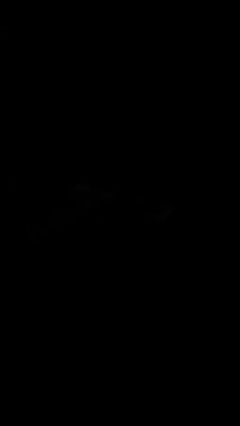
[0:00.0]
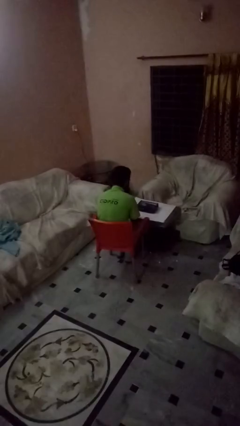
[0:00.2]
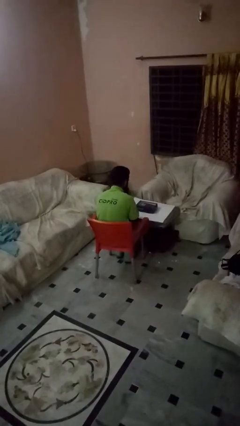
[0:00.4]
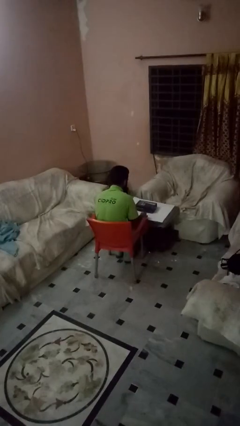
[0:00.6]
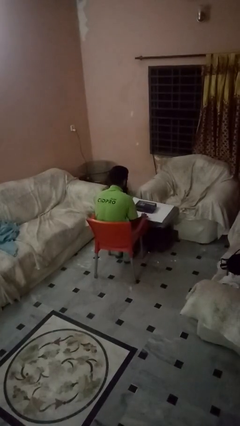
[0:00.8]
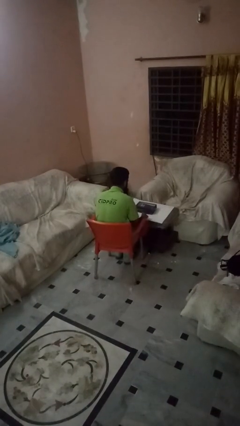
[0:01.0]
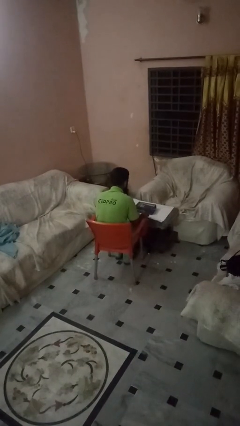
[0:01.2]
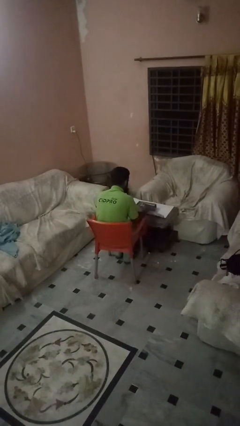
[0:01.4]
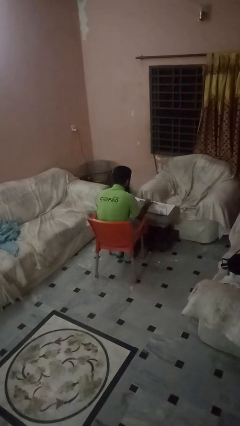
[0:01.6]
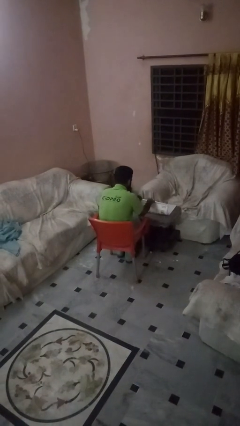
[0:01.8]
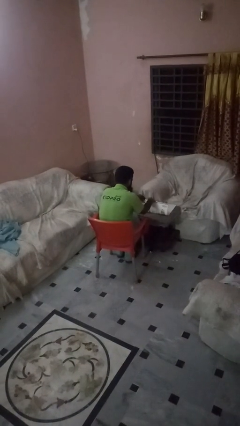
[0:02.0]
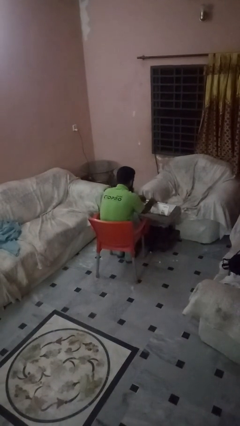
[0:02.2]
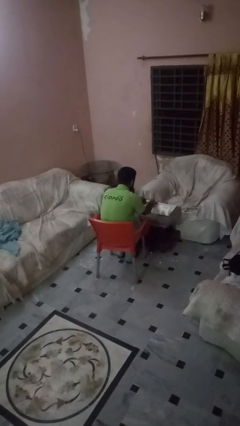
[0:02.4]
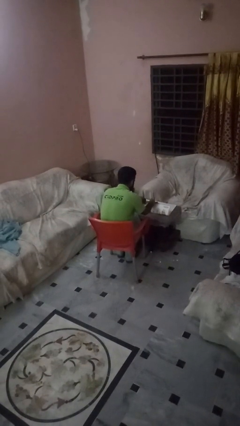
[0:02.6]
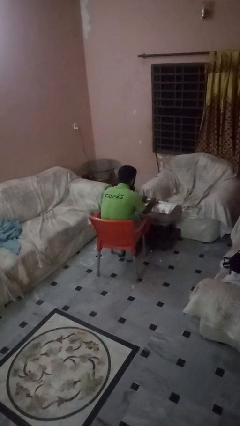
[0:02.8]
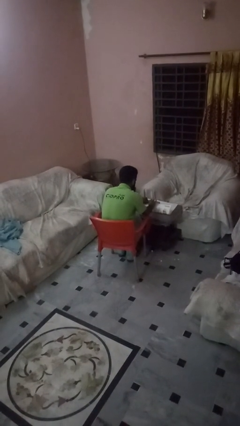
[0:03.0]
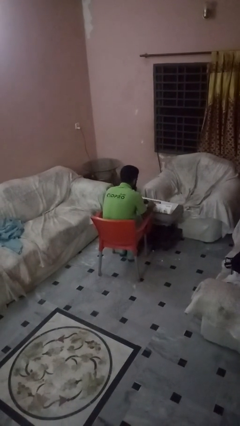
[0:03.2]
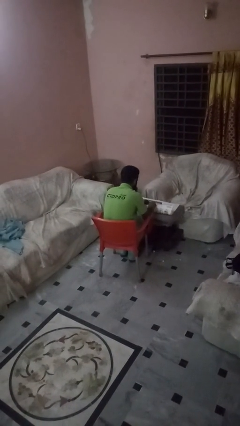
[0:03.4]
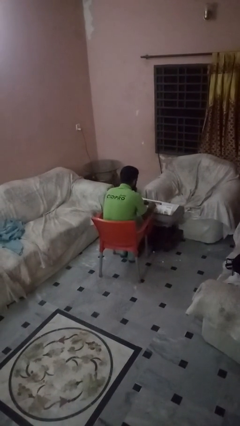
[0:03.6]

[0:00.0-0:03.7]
person wraps box

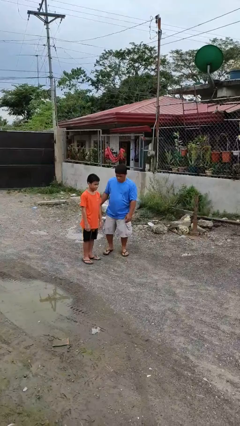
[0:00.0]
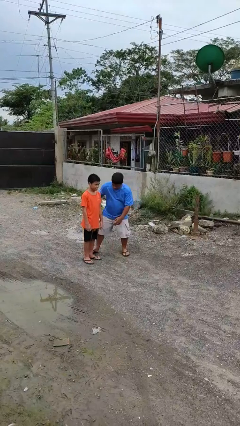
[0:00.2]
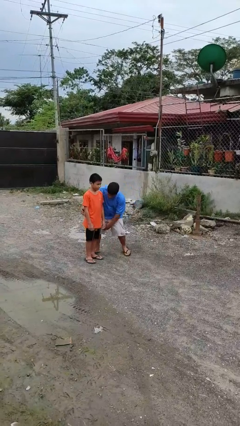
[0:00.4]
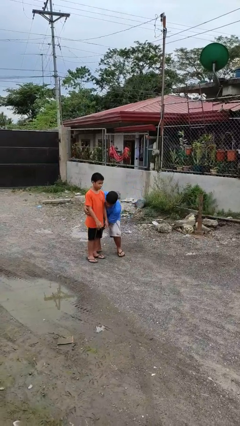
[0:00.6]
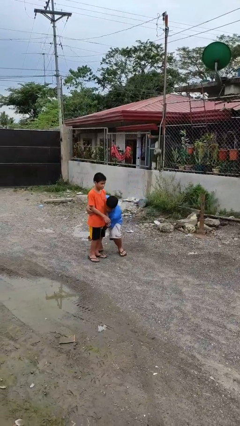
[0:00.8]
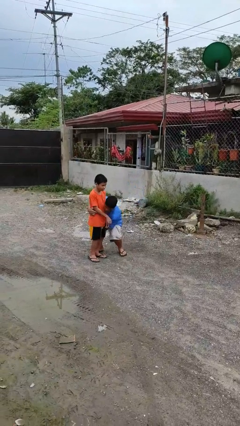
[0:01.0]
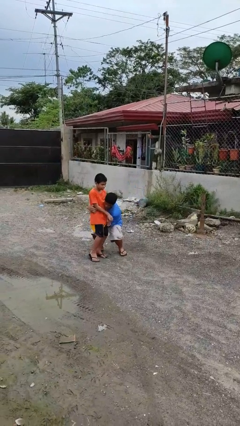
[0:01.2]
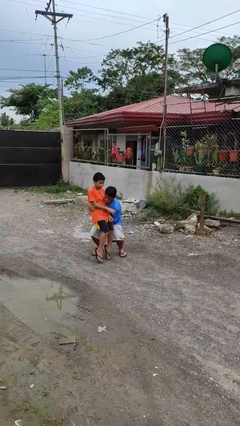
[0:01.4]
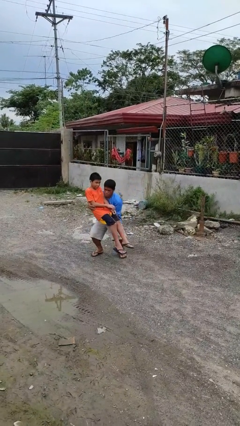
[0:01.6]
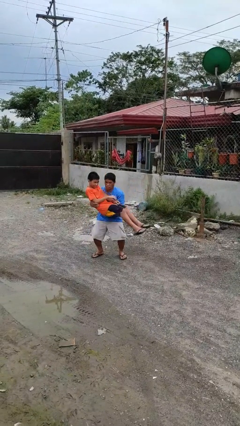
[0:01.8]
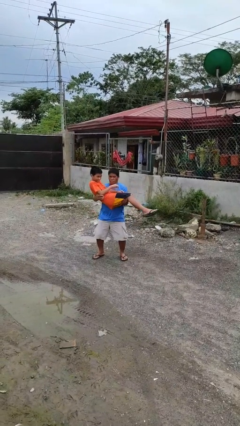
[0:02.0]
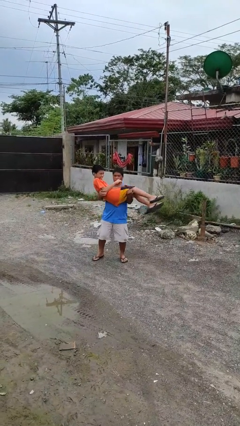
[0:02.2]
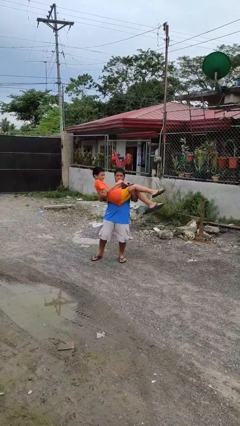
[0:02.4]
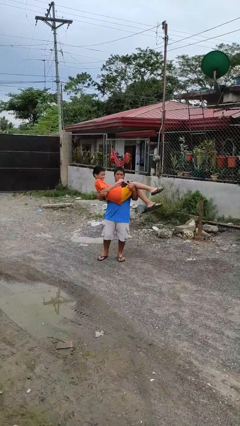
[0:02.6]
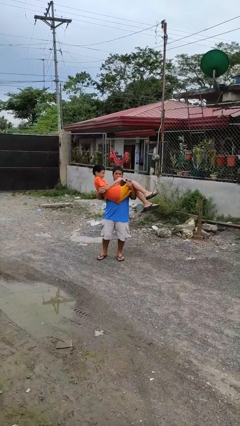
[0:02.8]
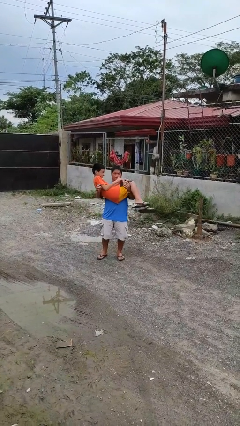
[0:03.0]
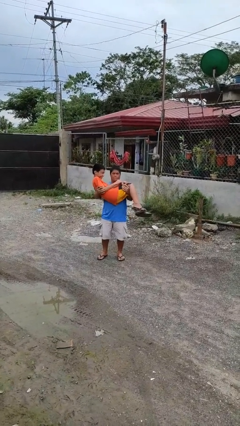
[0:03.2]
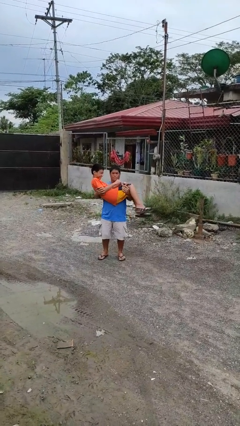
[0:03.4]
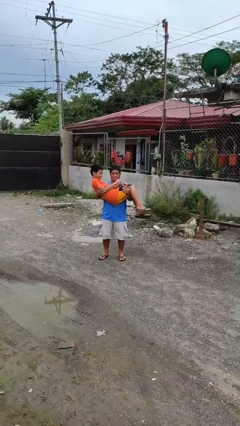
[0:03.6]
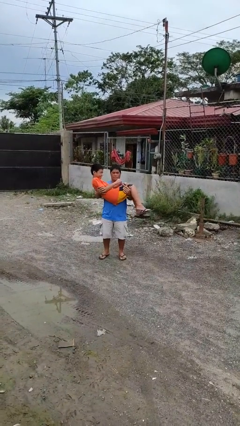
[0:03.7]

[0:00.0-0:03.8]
person picks up person

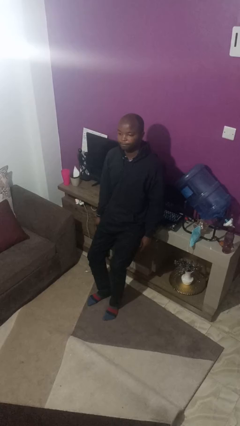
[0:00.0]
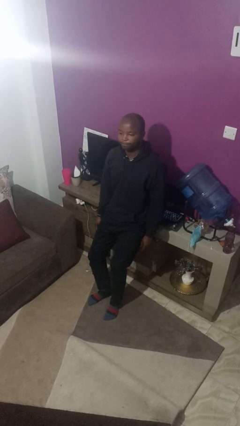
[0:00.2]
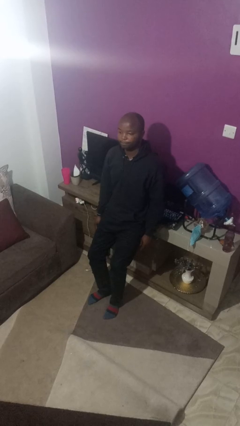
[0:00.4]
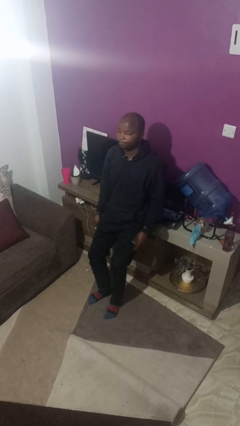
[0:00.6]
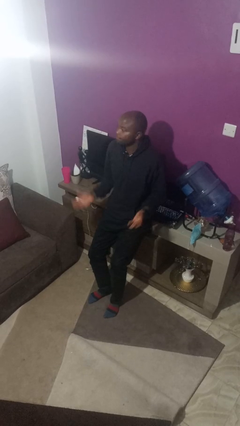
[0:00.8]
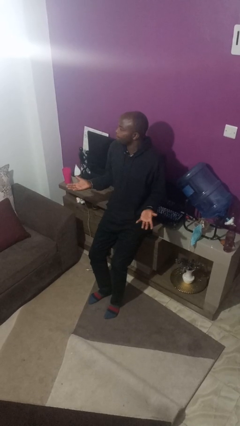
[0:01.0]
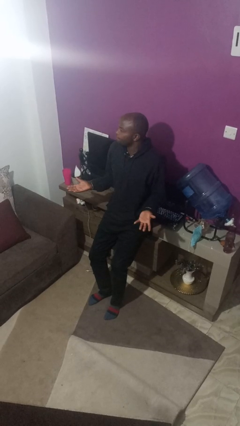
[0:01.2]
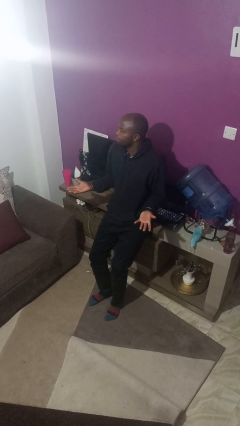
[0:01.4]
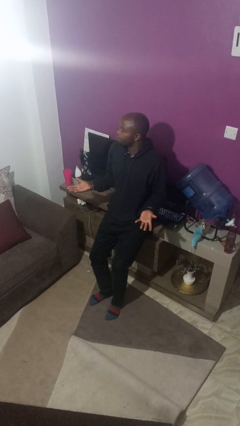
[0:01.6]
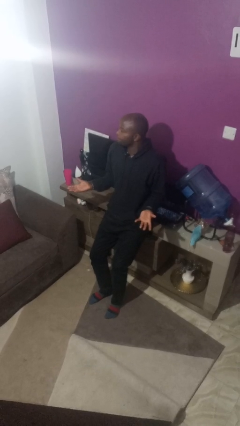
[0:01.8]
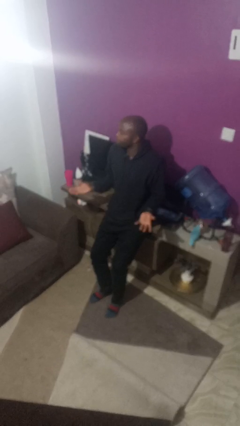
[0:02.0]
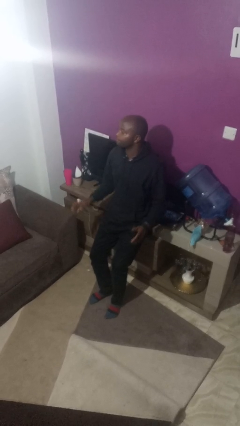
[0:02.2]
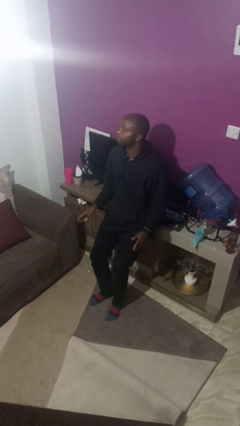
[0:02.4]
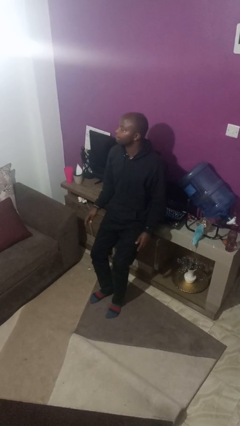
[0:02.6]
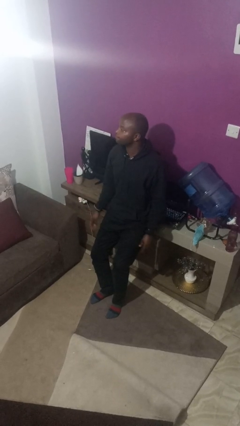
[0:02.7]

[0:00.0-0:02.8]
person shrugs

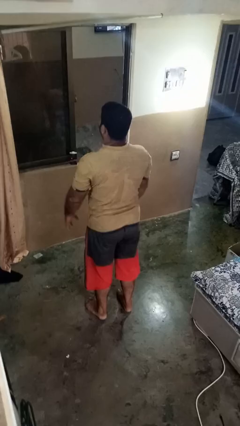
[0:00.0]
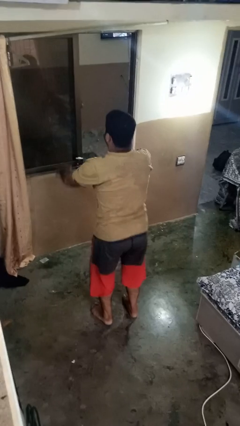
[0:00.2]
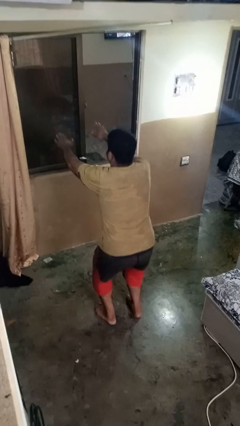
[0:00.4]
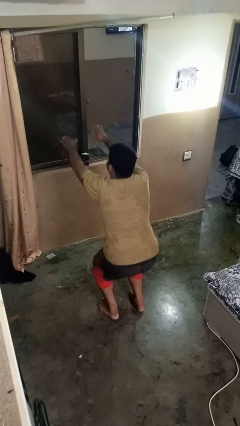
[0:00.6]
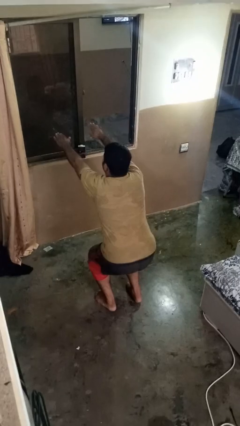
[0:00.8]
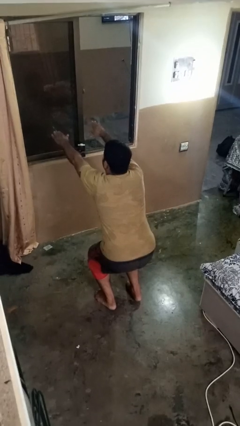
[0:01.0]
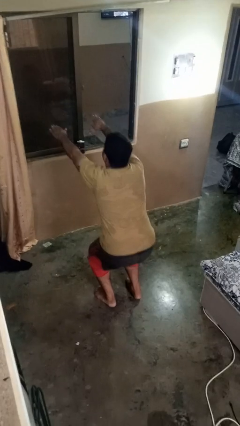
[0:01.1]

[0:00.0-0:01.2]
person squats

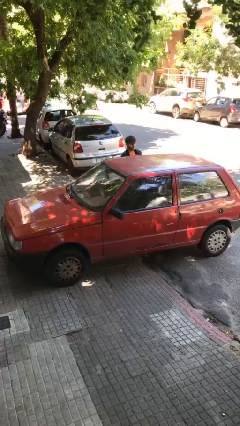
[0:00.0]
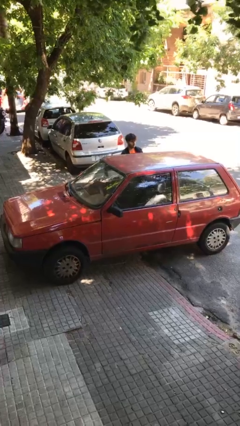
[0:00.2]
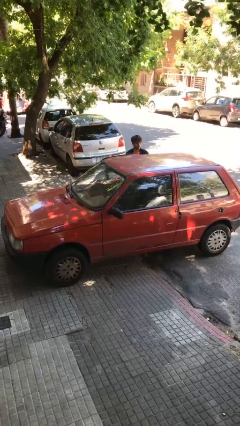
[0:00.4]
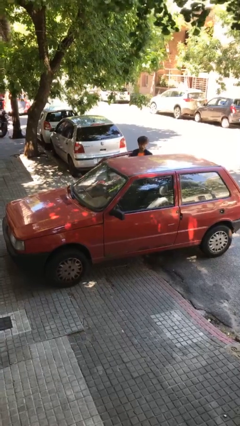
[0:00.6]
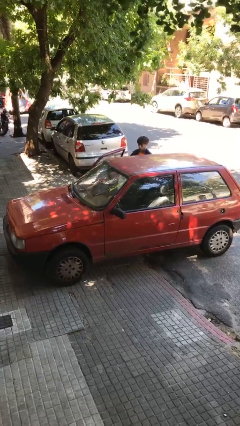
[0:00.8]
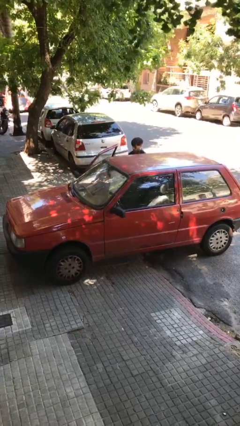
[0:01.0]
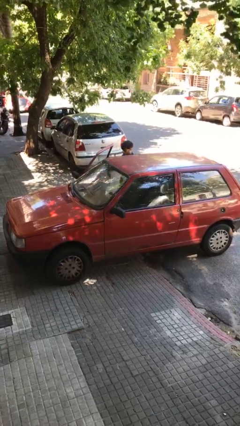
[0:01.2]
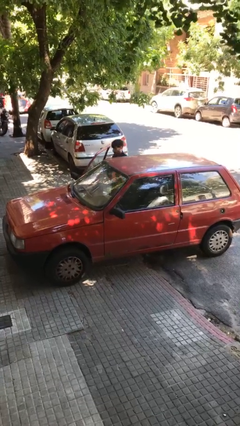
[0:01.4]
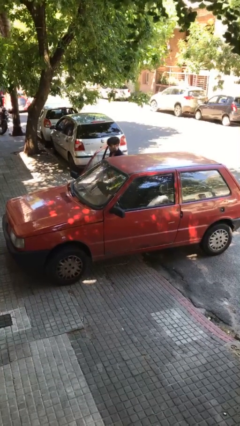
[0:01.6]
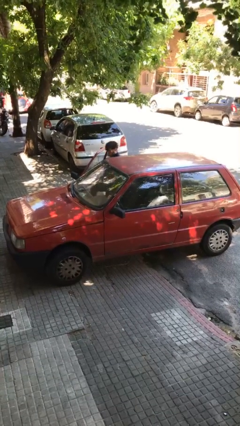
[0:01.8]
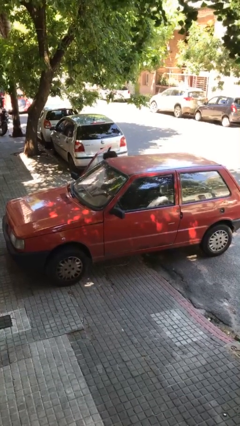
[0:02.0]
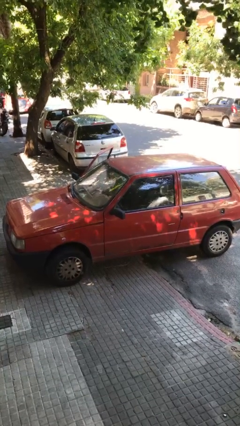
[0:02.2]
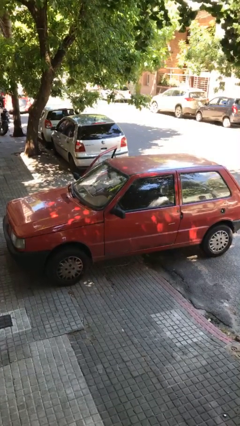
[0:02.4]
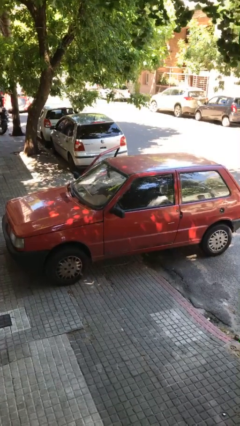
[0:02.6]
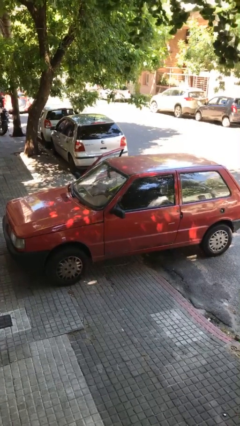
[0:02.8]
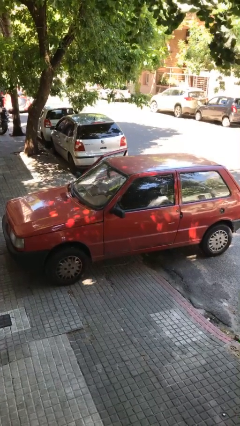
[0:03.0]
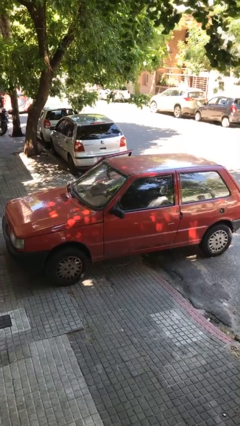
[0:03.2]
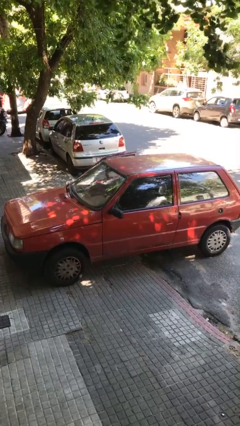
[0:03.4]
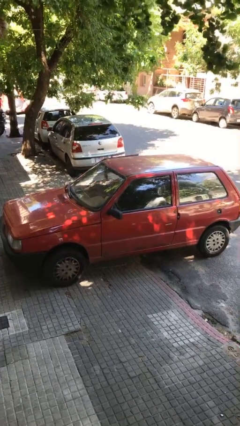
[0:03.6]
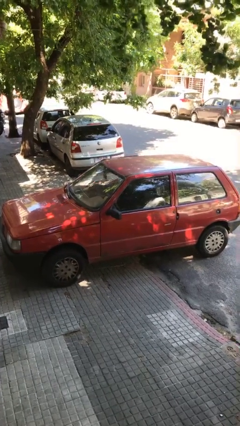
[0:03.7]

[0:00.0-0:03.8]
car picks up person

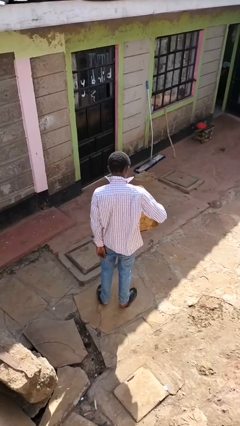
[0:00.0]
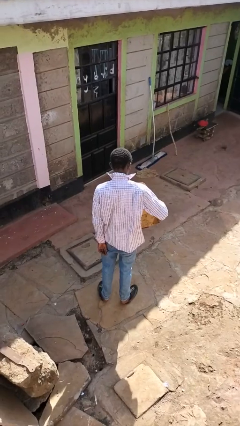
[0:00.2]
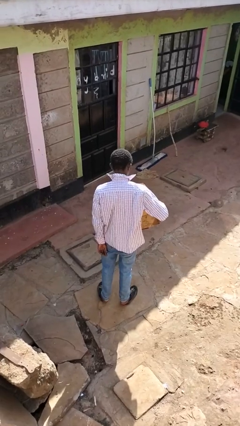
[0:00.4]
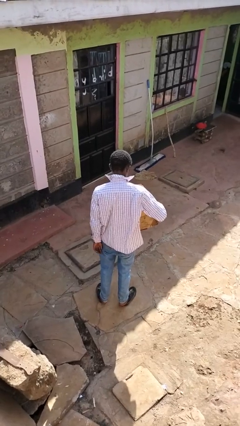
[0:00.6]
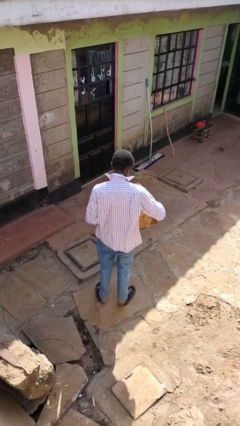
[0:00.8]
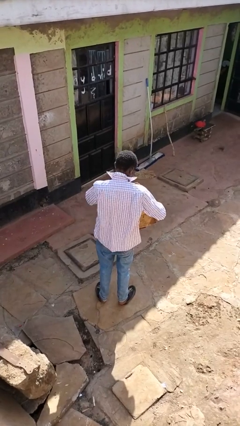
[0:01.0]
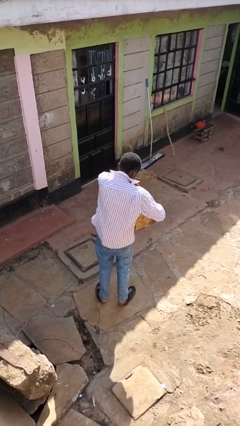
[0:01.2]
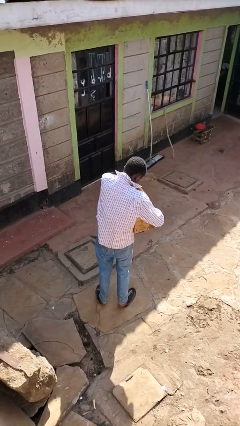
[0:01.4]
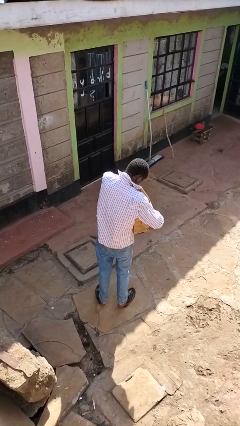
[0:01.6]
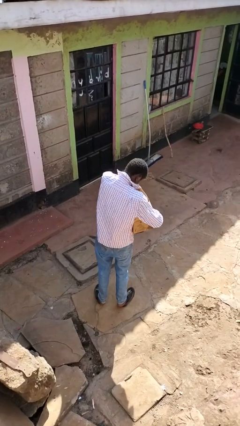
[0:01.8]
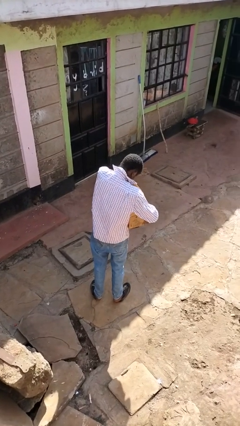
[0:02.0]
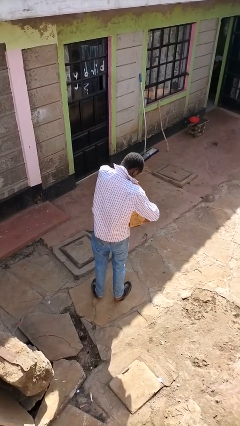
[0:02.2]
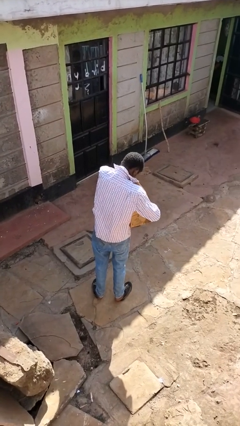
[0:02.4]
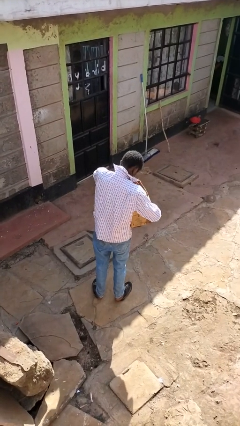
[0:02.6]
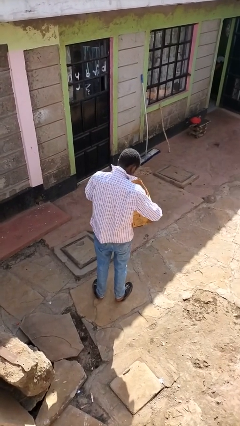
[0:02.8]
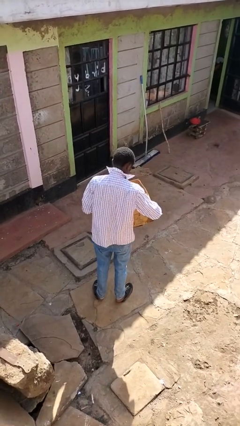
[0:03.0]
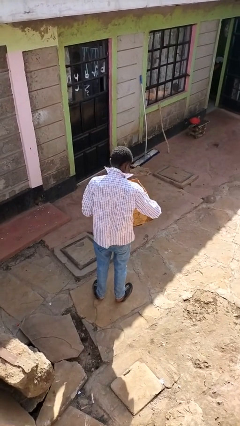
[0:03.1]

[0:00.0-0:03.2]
person searches in box
